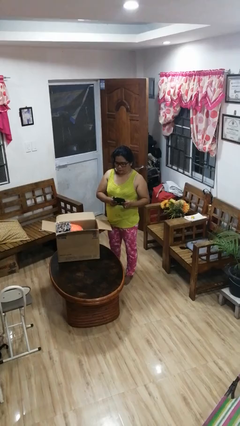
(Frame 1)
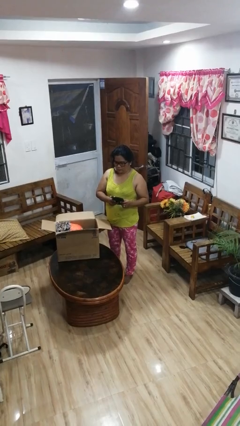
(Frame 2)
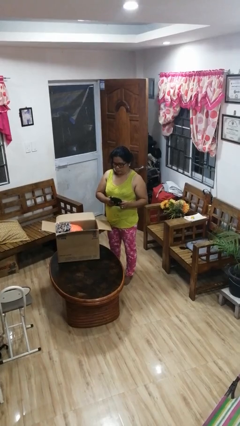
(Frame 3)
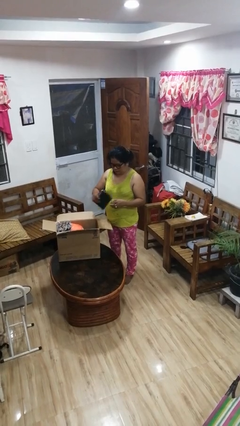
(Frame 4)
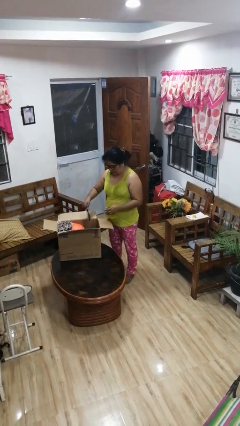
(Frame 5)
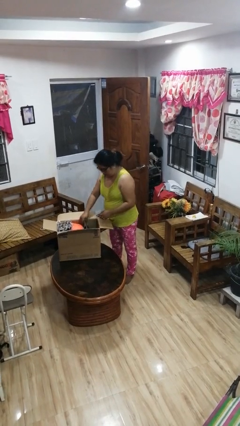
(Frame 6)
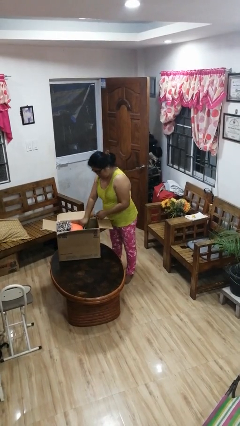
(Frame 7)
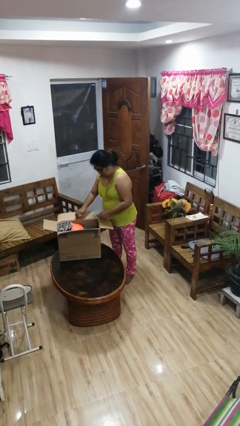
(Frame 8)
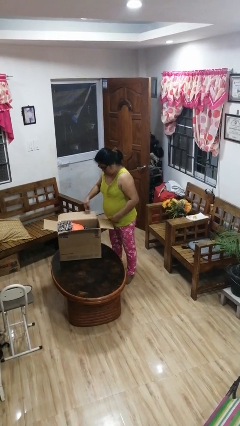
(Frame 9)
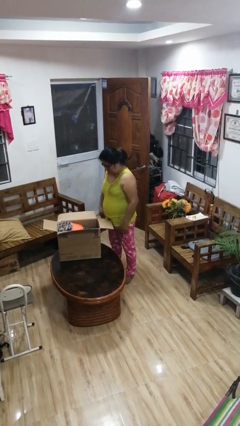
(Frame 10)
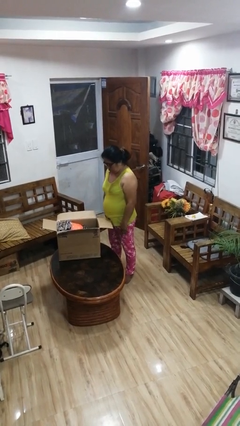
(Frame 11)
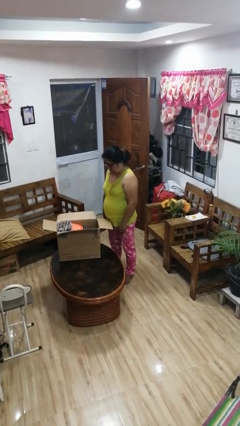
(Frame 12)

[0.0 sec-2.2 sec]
person puts object into box

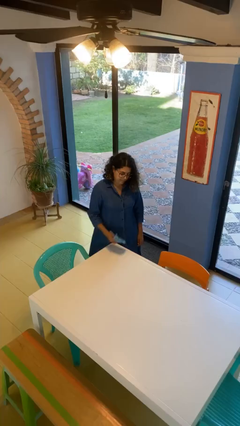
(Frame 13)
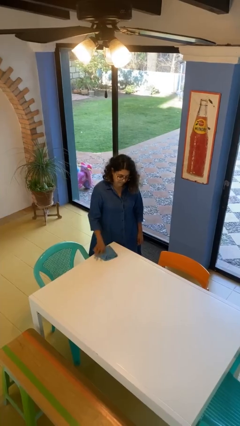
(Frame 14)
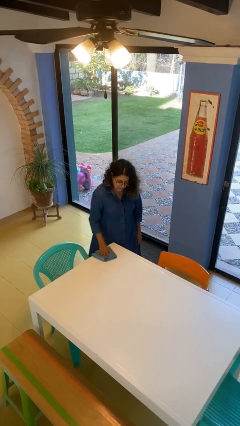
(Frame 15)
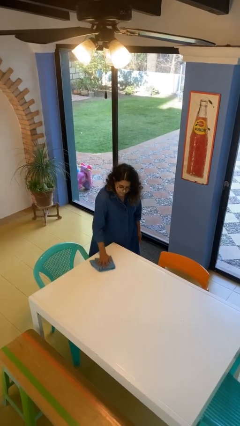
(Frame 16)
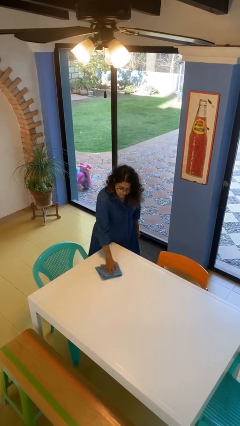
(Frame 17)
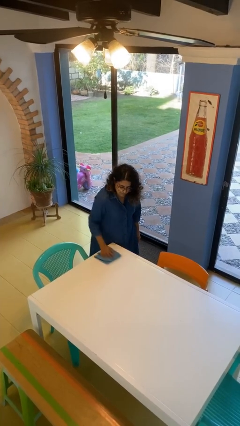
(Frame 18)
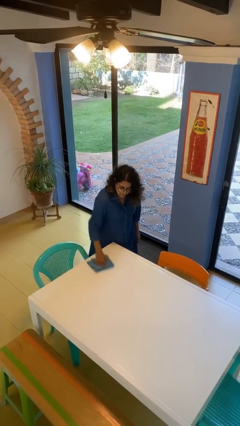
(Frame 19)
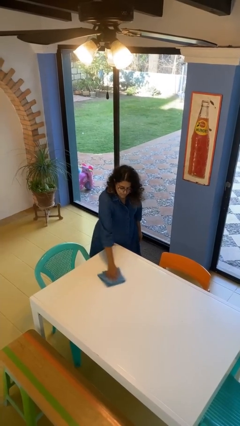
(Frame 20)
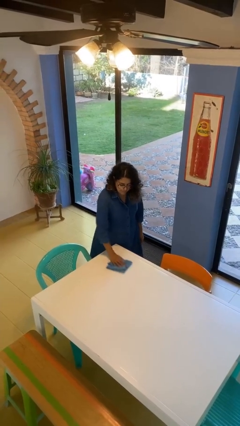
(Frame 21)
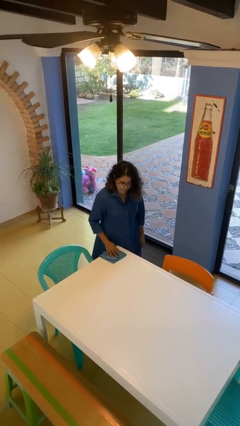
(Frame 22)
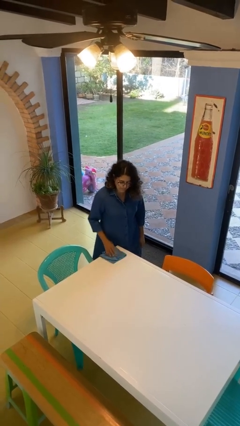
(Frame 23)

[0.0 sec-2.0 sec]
person cleans table with rag

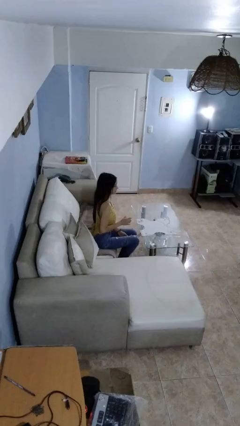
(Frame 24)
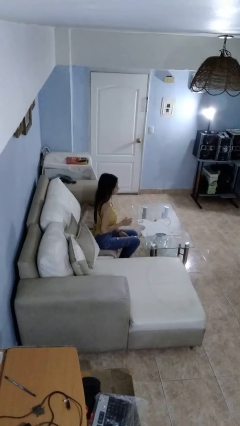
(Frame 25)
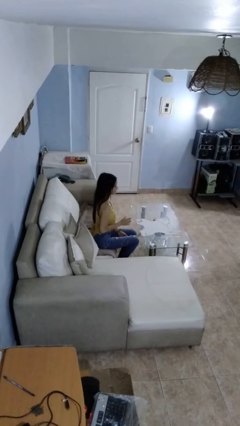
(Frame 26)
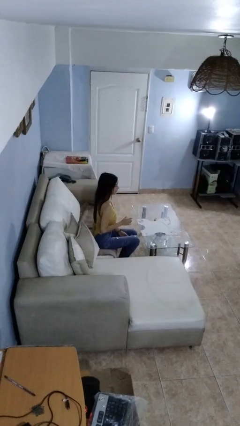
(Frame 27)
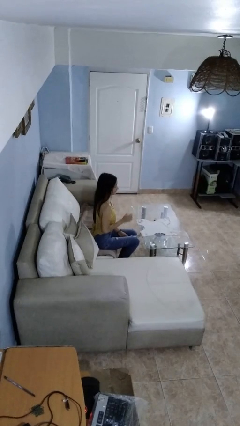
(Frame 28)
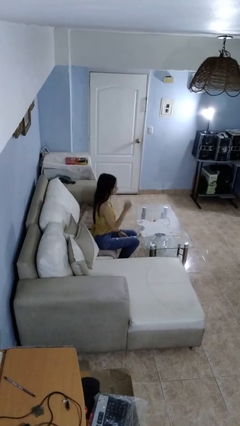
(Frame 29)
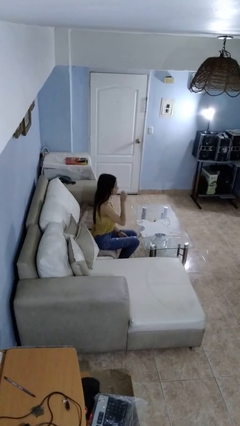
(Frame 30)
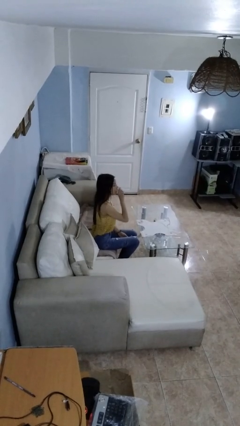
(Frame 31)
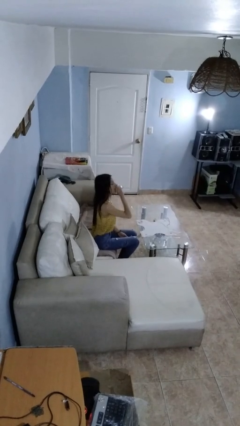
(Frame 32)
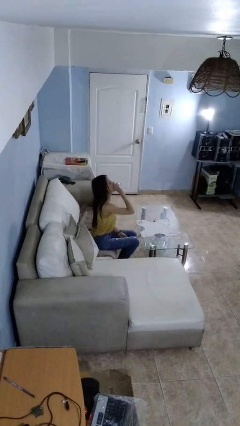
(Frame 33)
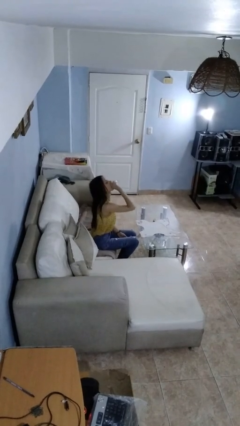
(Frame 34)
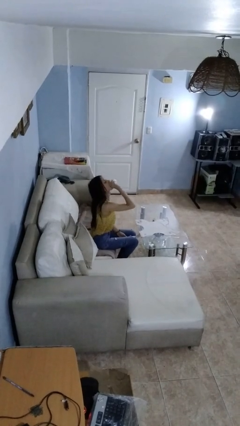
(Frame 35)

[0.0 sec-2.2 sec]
person drinks from shotglass

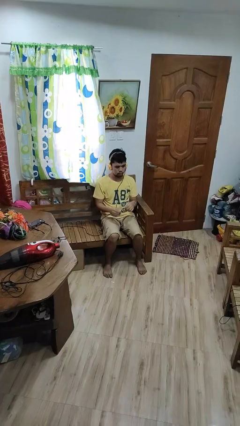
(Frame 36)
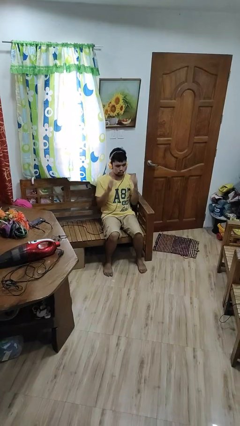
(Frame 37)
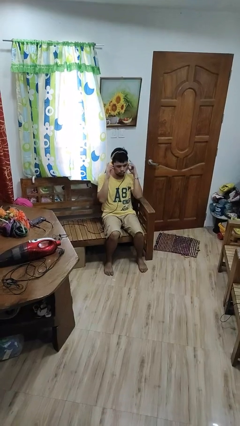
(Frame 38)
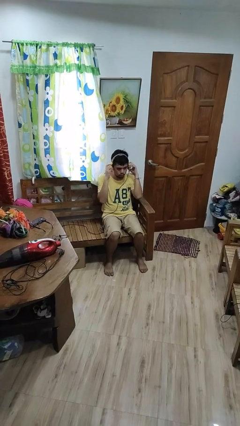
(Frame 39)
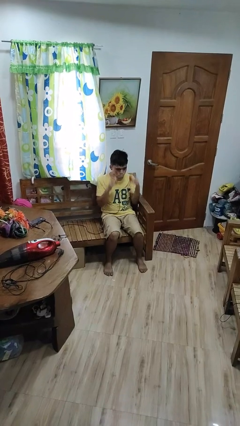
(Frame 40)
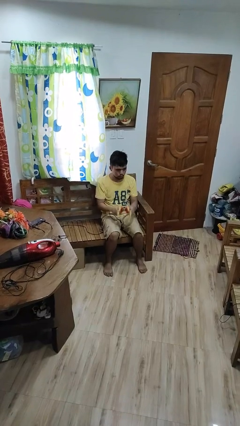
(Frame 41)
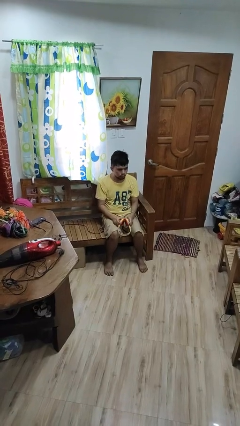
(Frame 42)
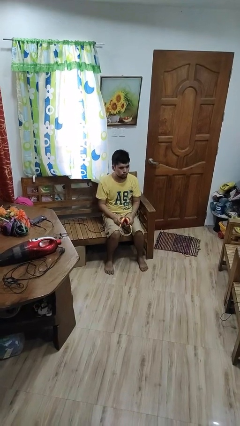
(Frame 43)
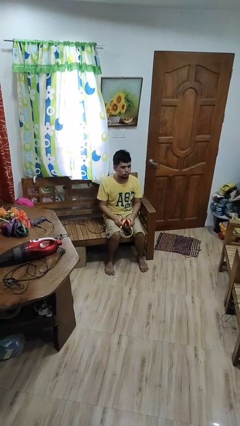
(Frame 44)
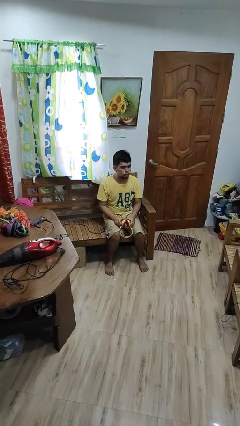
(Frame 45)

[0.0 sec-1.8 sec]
person takes off headphones

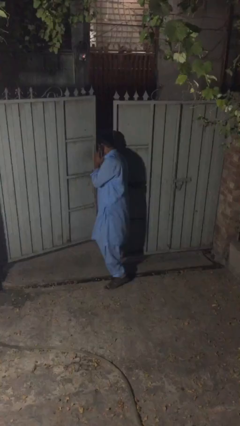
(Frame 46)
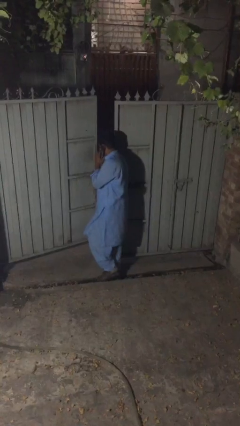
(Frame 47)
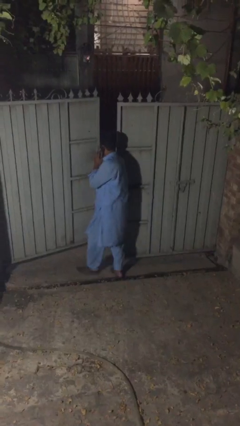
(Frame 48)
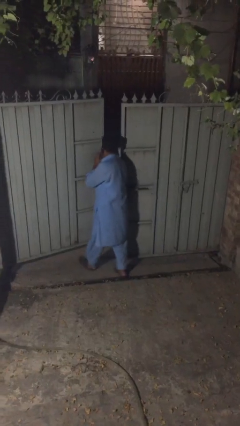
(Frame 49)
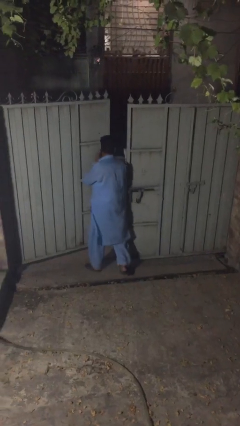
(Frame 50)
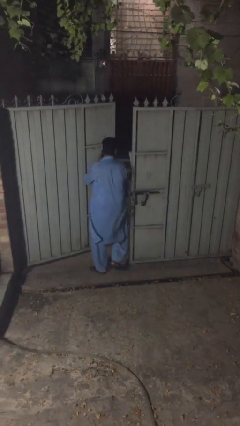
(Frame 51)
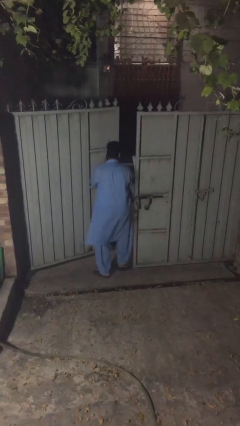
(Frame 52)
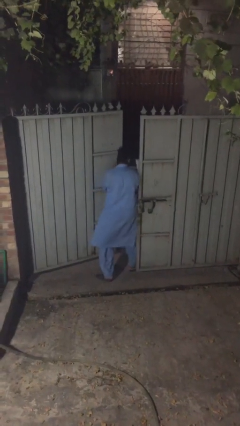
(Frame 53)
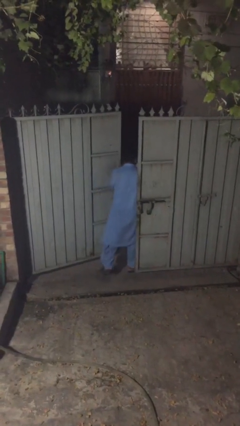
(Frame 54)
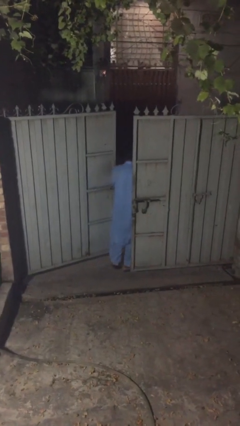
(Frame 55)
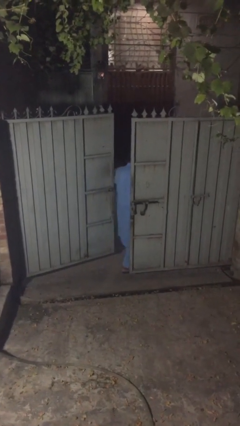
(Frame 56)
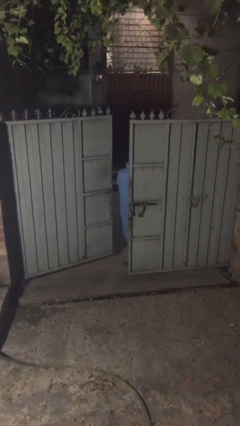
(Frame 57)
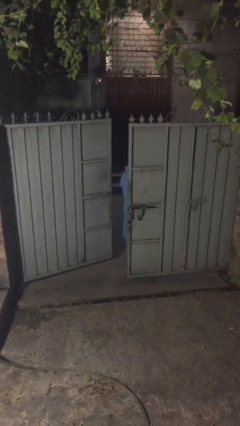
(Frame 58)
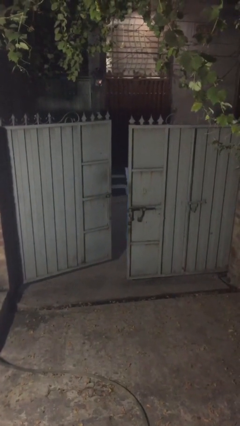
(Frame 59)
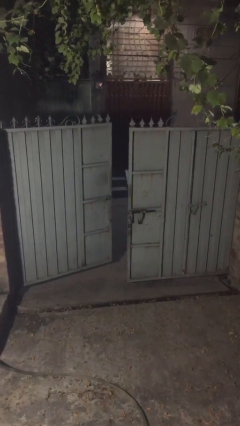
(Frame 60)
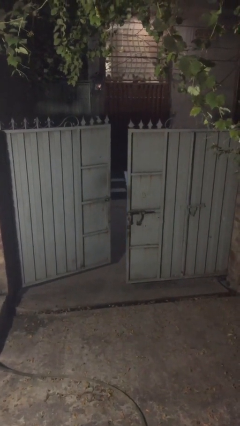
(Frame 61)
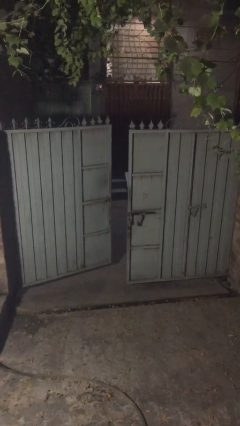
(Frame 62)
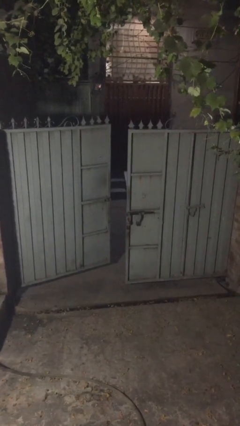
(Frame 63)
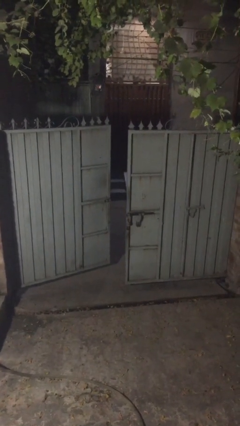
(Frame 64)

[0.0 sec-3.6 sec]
person exits scene through structure

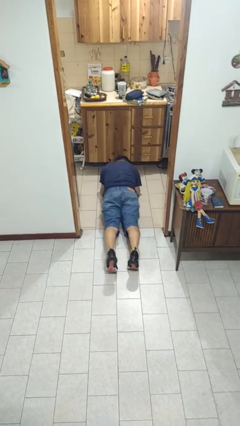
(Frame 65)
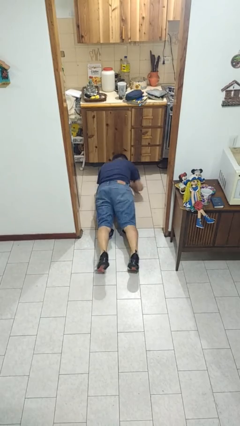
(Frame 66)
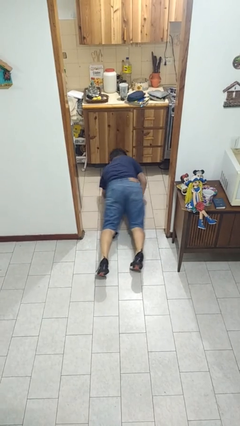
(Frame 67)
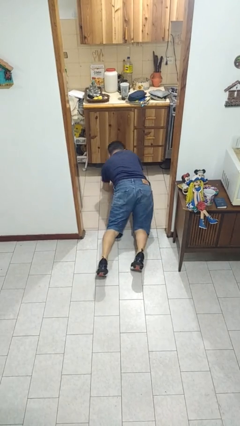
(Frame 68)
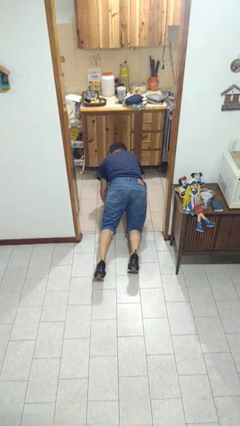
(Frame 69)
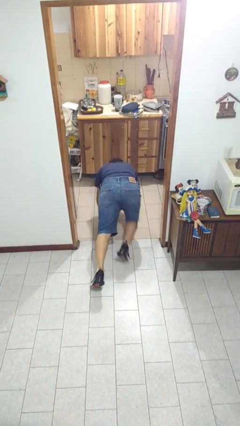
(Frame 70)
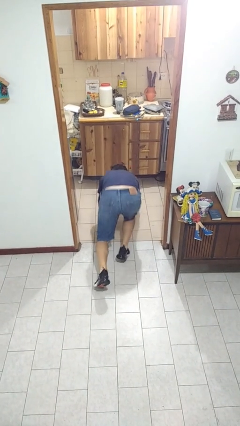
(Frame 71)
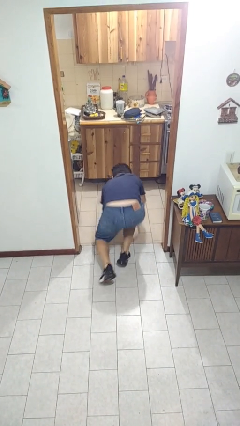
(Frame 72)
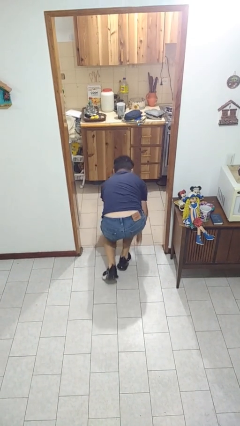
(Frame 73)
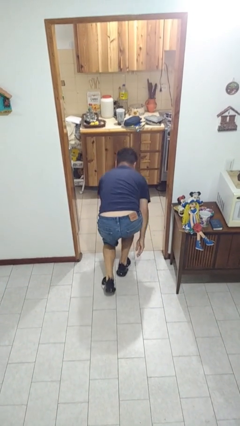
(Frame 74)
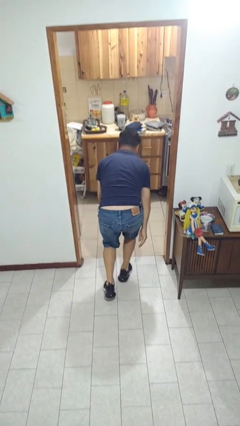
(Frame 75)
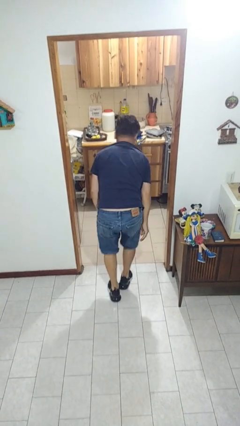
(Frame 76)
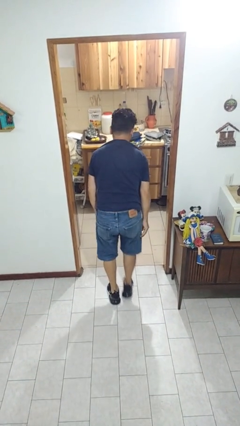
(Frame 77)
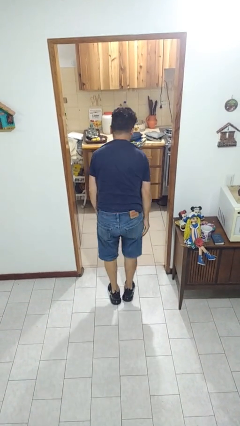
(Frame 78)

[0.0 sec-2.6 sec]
person stands up from floor

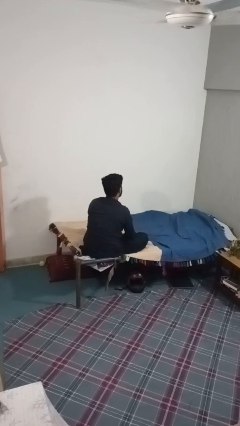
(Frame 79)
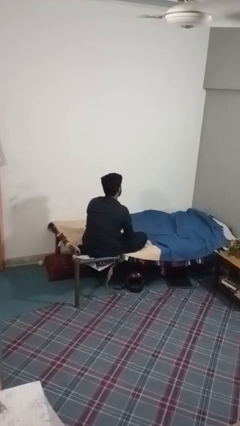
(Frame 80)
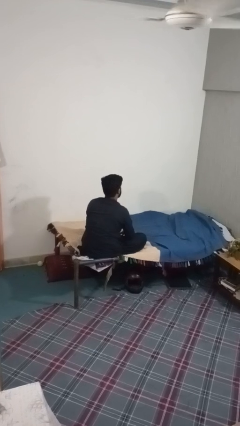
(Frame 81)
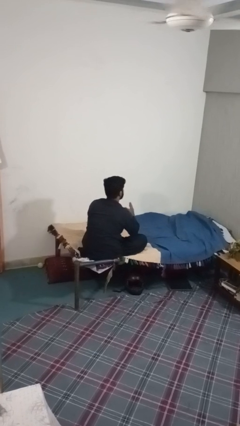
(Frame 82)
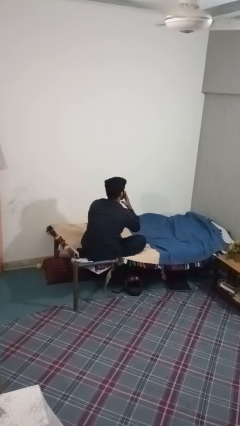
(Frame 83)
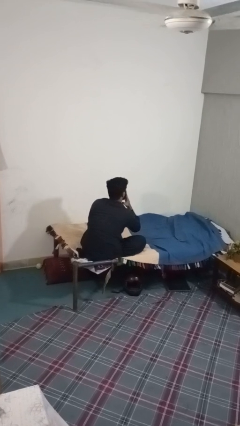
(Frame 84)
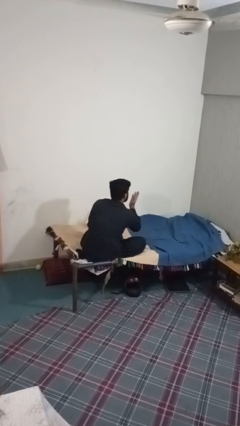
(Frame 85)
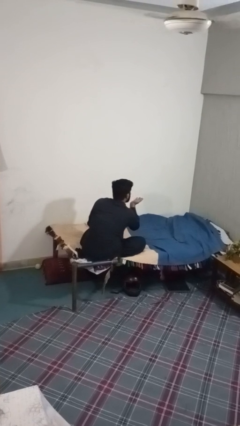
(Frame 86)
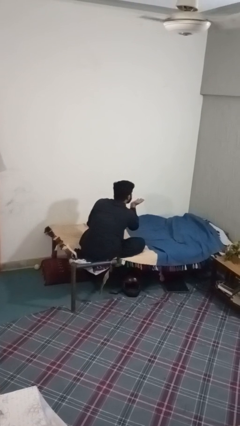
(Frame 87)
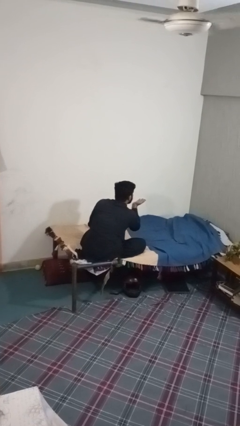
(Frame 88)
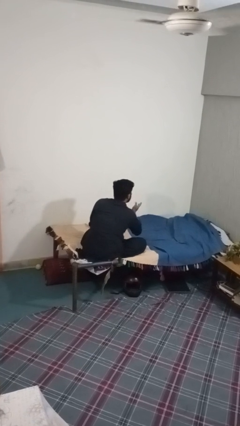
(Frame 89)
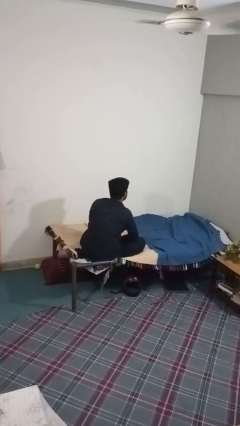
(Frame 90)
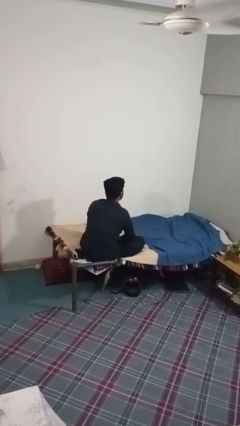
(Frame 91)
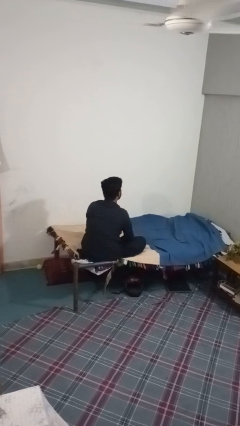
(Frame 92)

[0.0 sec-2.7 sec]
person gestures blow kiss
